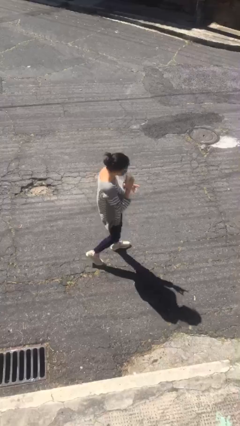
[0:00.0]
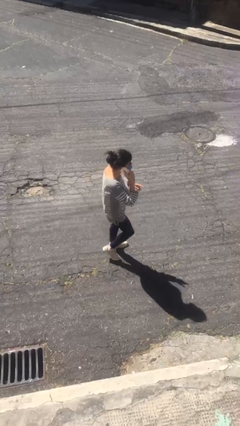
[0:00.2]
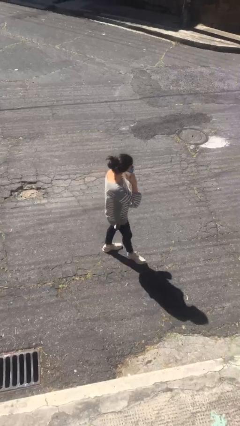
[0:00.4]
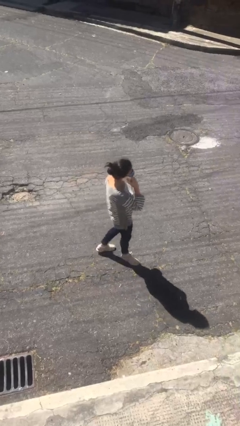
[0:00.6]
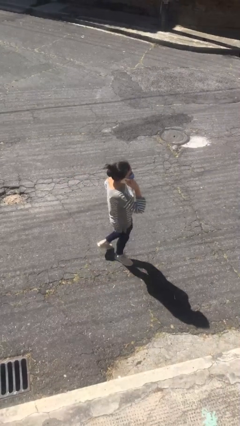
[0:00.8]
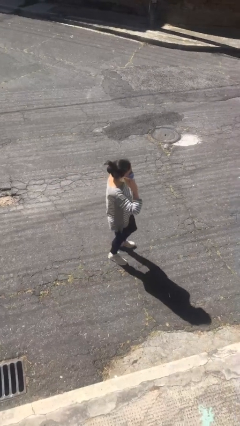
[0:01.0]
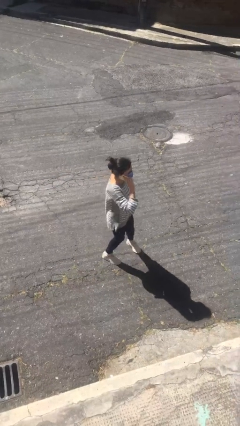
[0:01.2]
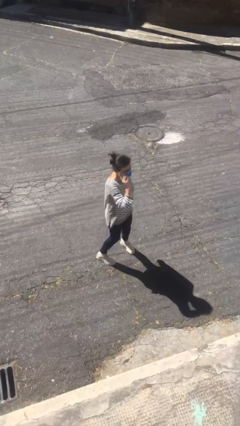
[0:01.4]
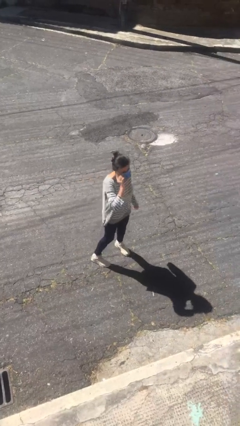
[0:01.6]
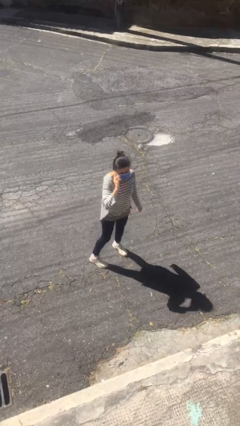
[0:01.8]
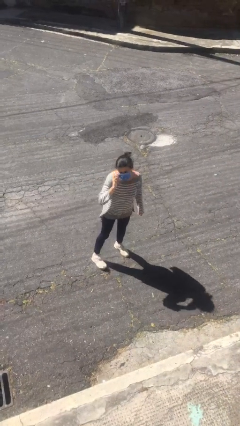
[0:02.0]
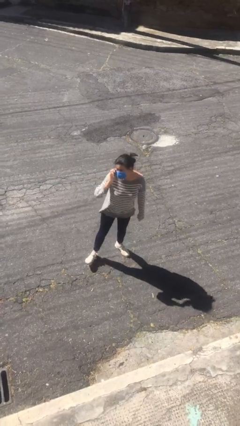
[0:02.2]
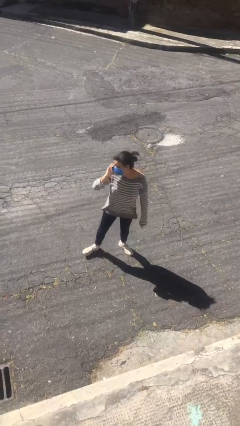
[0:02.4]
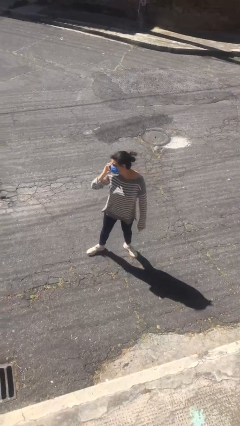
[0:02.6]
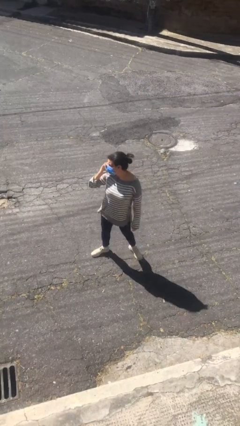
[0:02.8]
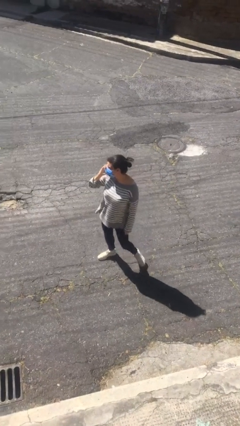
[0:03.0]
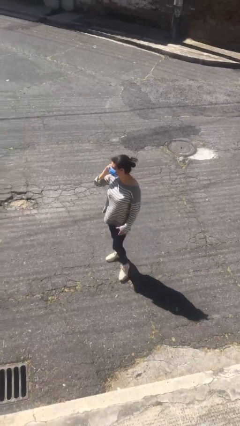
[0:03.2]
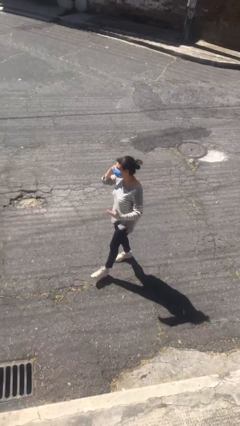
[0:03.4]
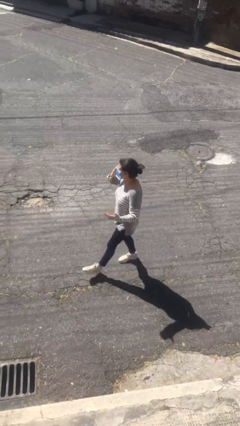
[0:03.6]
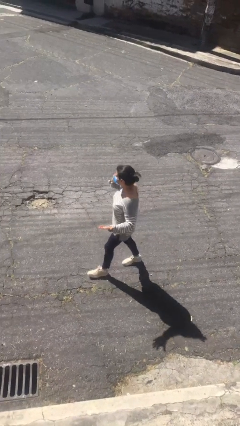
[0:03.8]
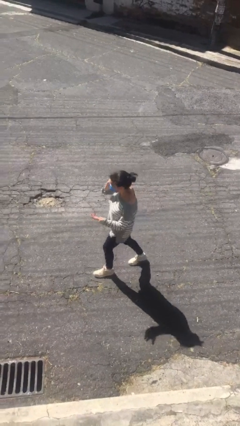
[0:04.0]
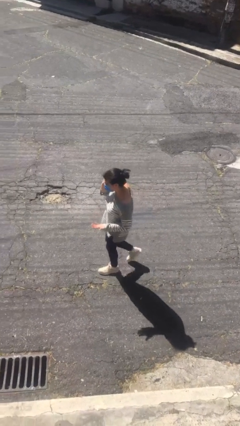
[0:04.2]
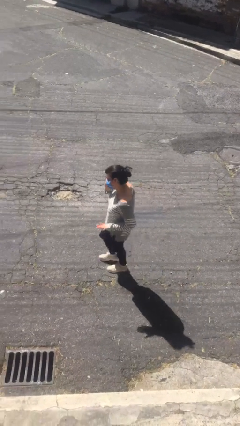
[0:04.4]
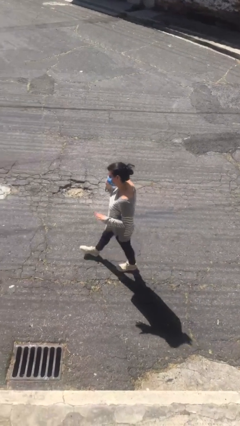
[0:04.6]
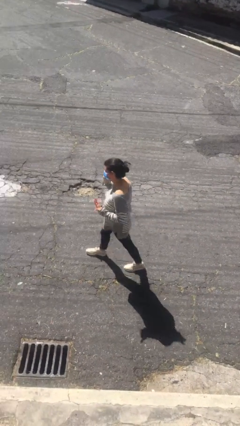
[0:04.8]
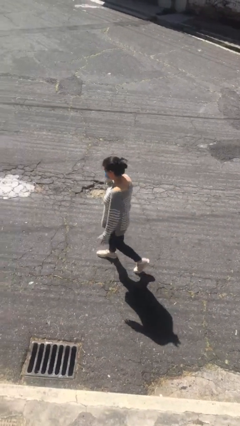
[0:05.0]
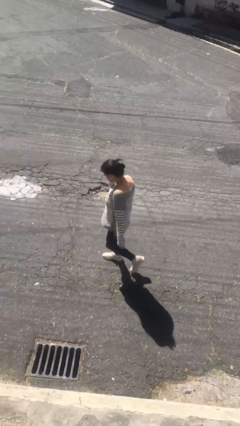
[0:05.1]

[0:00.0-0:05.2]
person talks on phone

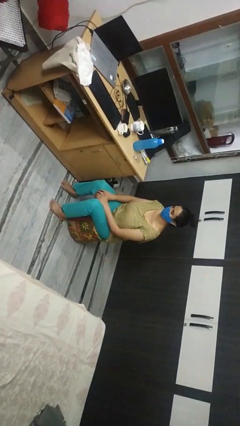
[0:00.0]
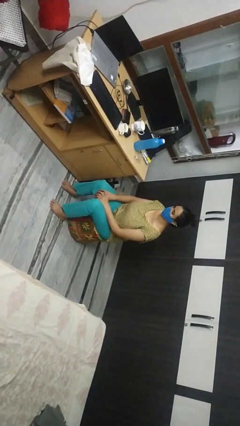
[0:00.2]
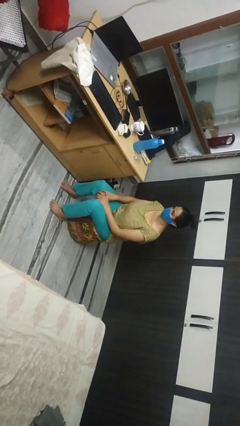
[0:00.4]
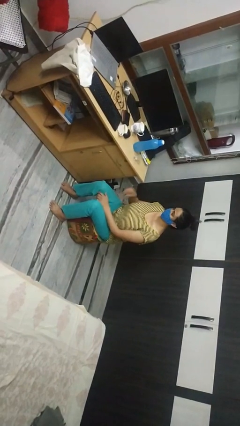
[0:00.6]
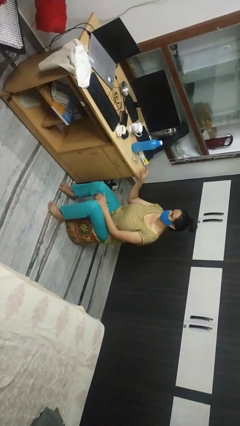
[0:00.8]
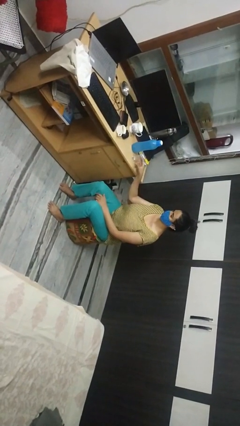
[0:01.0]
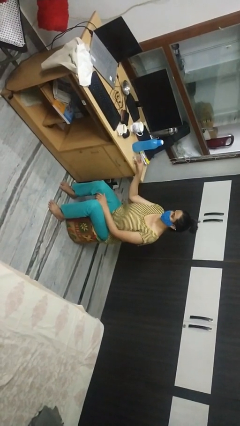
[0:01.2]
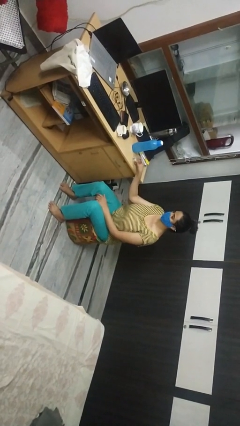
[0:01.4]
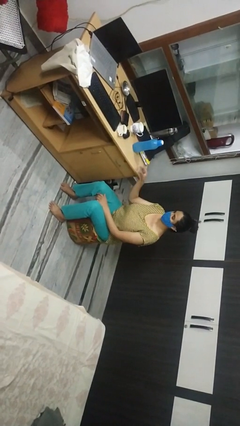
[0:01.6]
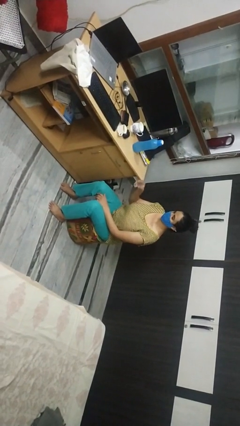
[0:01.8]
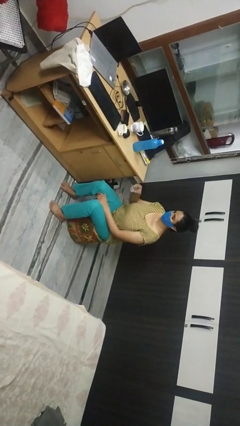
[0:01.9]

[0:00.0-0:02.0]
person picks up object from table

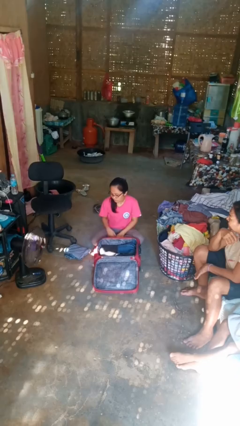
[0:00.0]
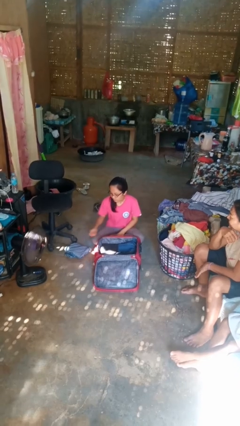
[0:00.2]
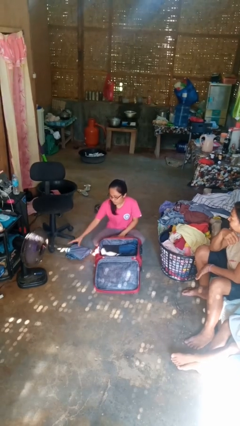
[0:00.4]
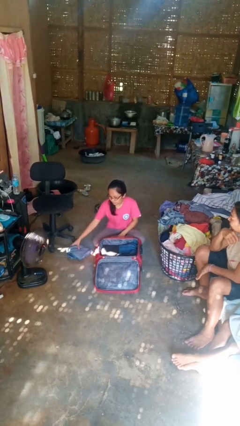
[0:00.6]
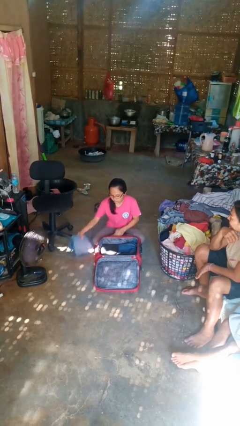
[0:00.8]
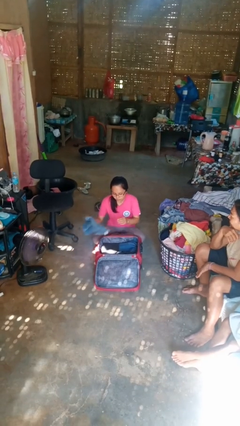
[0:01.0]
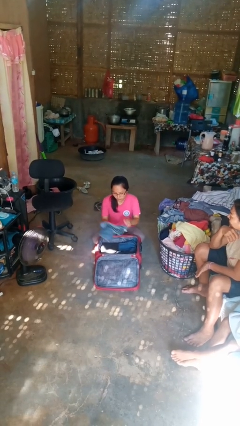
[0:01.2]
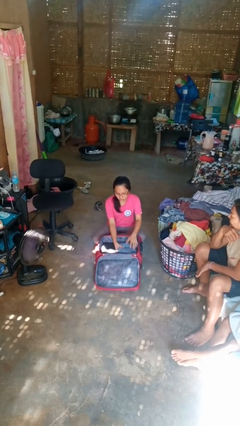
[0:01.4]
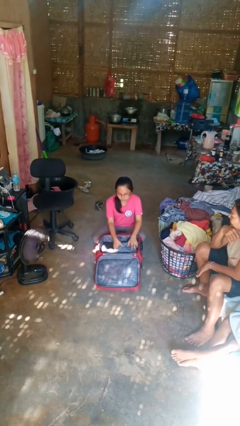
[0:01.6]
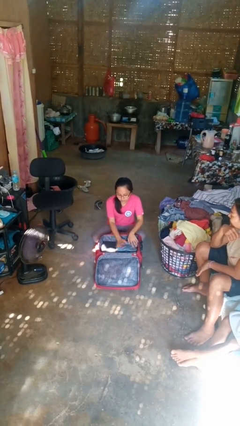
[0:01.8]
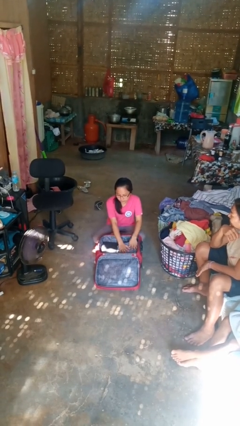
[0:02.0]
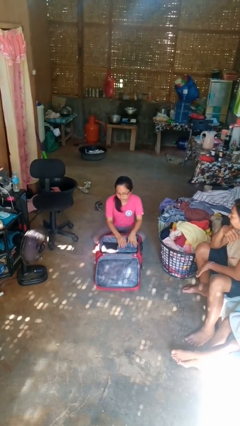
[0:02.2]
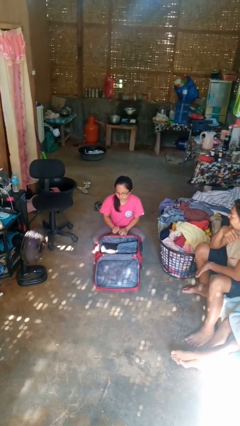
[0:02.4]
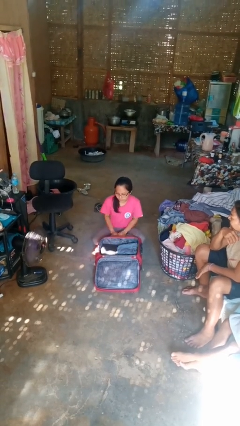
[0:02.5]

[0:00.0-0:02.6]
person loads clothes into suitcase

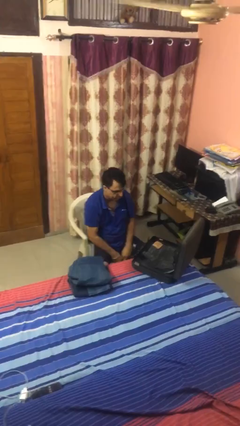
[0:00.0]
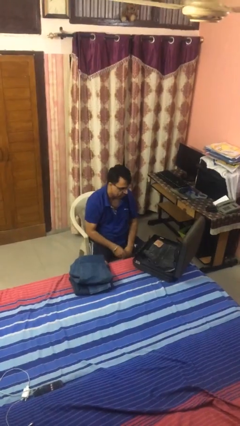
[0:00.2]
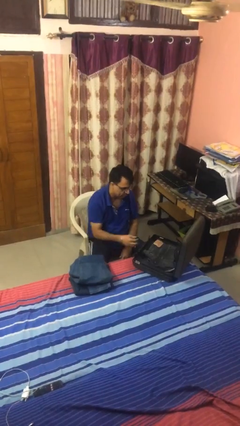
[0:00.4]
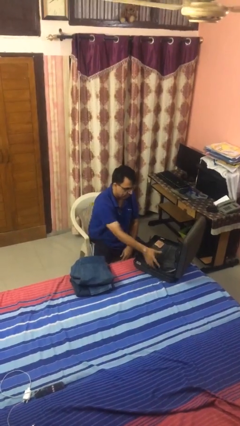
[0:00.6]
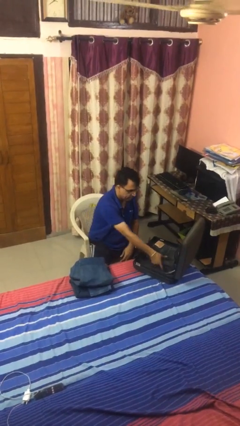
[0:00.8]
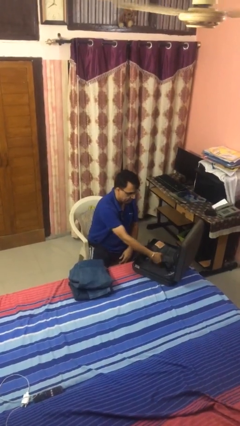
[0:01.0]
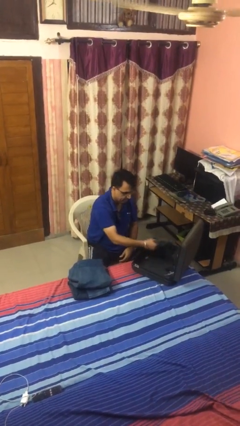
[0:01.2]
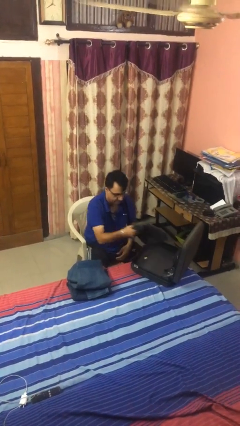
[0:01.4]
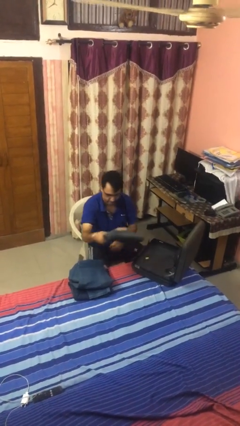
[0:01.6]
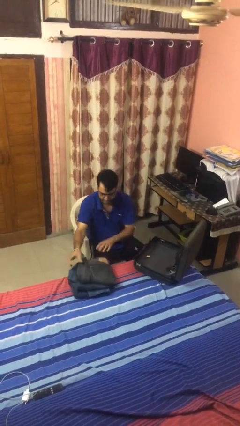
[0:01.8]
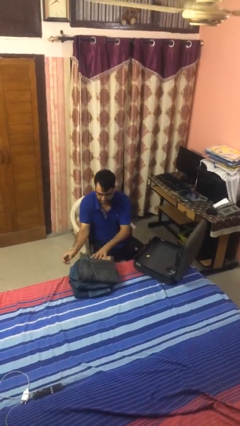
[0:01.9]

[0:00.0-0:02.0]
person unloads clothes from suitcase

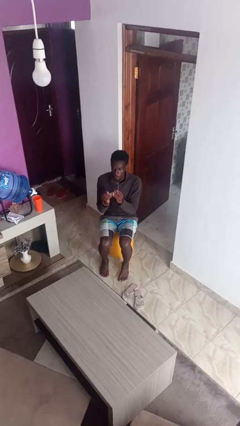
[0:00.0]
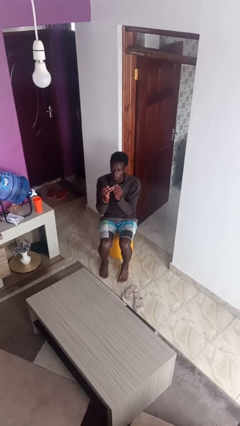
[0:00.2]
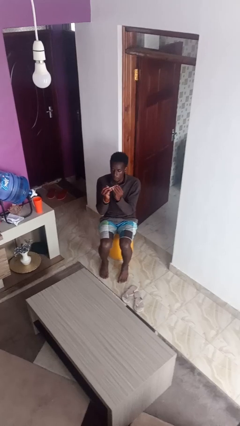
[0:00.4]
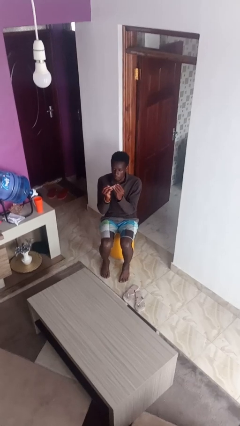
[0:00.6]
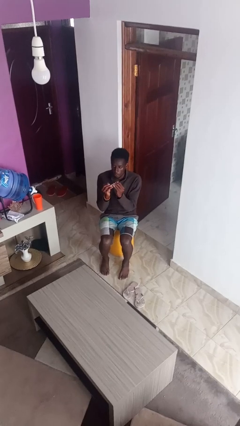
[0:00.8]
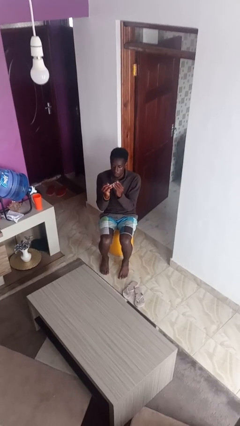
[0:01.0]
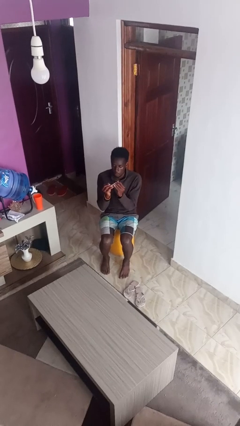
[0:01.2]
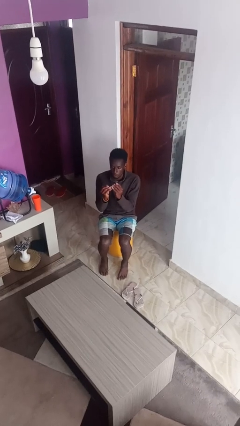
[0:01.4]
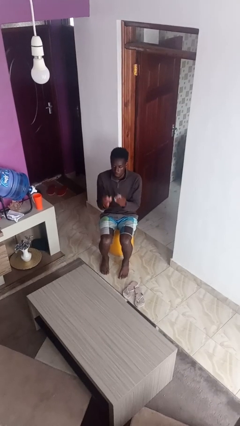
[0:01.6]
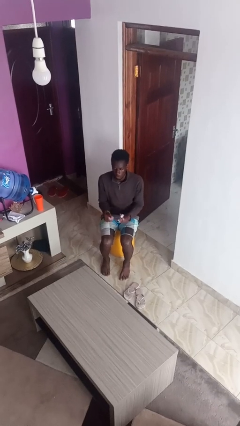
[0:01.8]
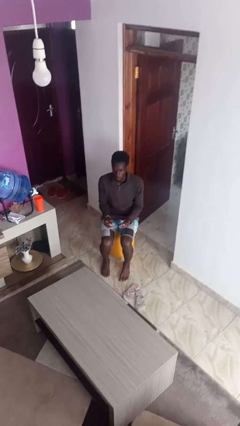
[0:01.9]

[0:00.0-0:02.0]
person clips fingernails

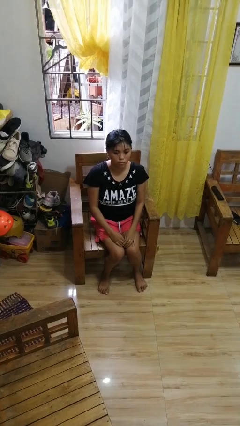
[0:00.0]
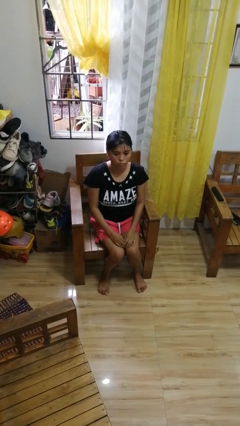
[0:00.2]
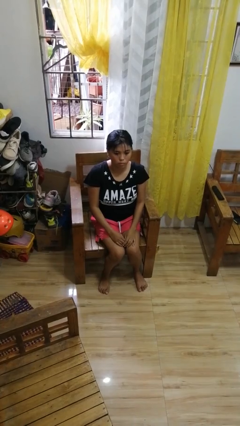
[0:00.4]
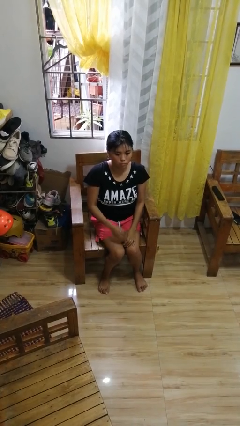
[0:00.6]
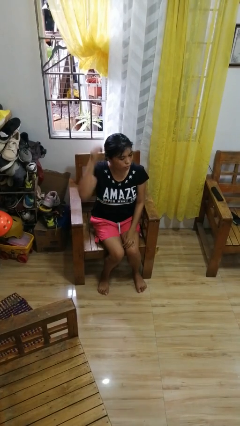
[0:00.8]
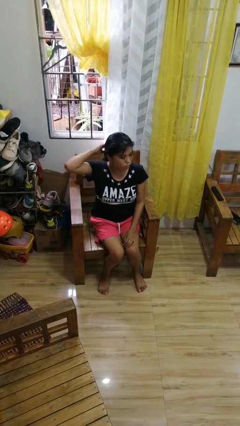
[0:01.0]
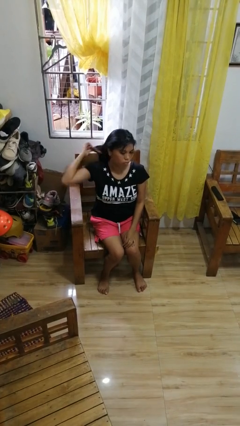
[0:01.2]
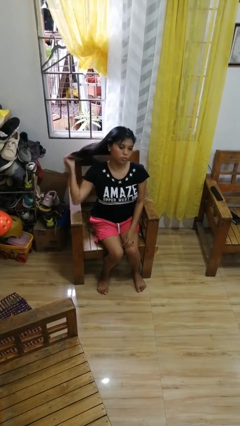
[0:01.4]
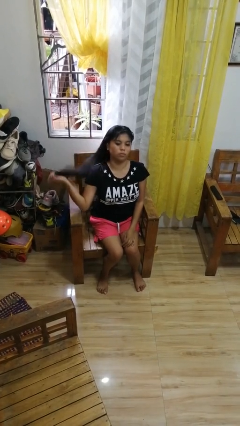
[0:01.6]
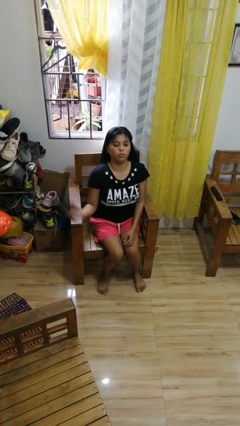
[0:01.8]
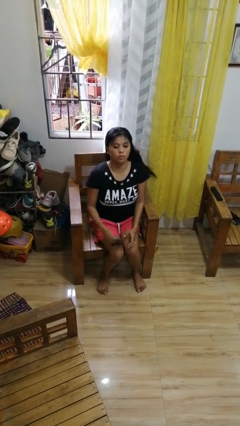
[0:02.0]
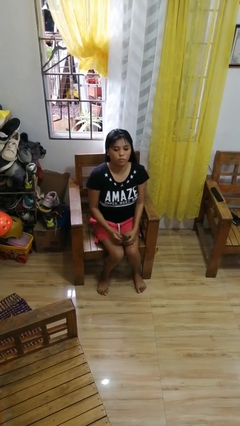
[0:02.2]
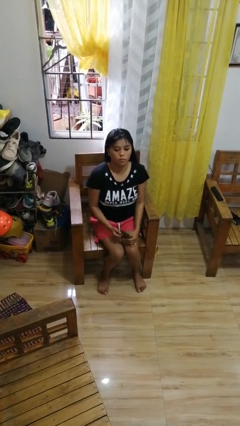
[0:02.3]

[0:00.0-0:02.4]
person takes off hairtie

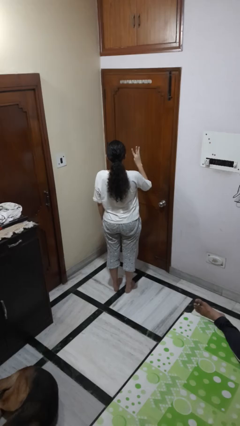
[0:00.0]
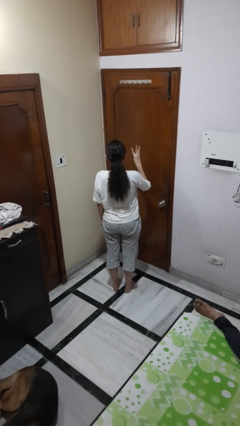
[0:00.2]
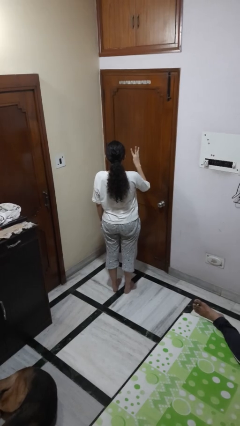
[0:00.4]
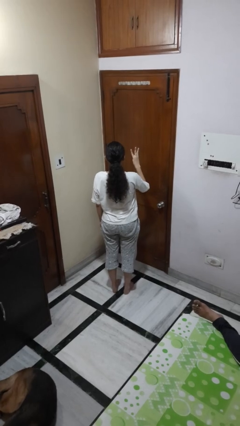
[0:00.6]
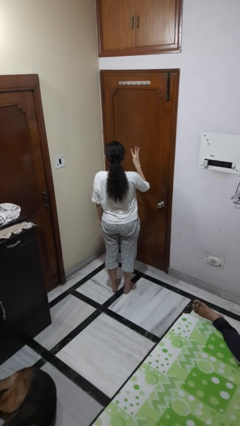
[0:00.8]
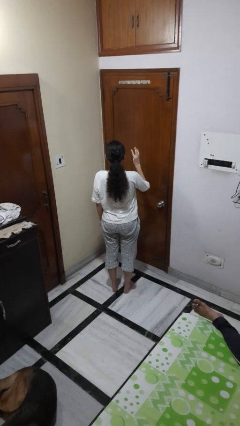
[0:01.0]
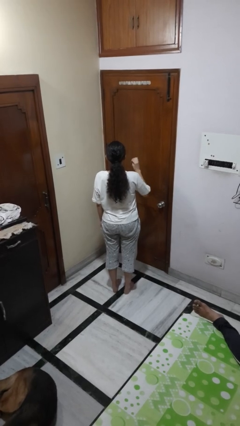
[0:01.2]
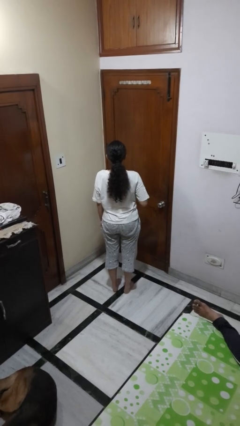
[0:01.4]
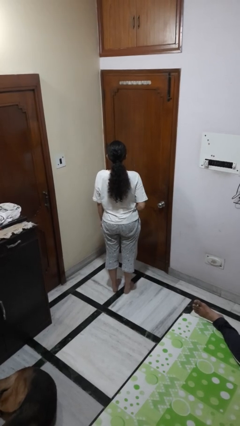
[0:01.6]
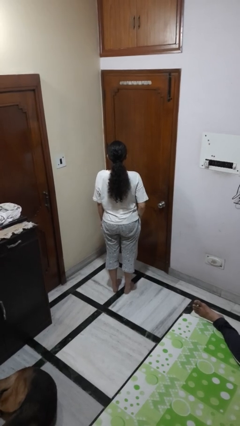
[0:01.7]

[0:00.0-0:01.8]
person gestures number three
